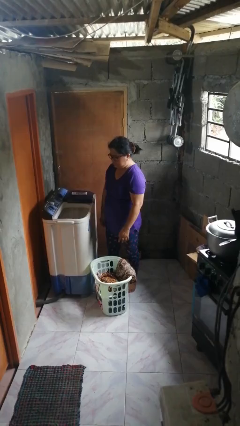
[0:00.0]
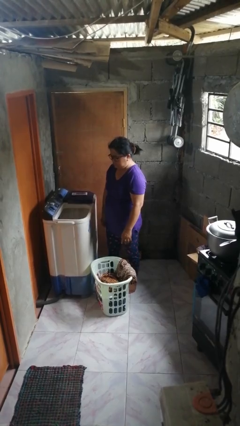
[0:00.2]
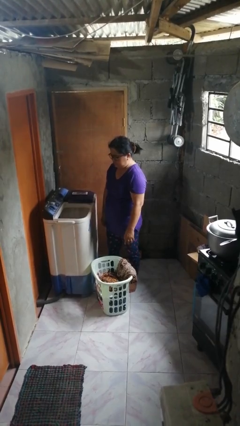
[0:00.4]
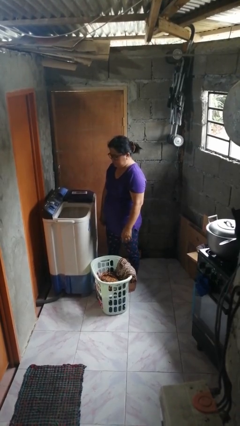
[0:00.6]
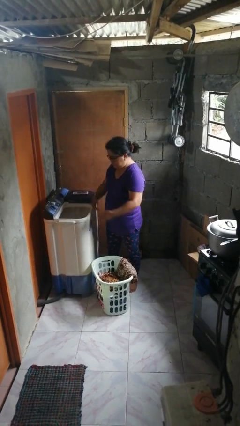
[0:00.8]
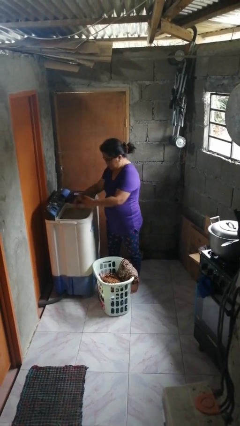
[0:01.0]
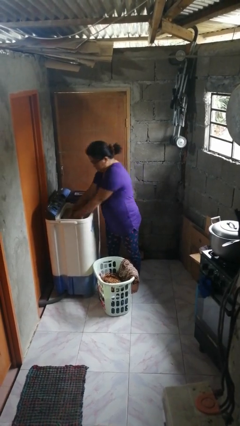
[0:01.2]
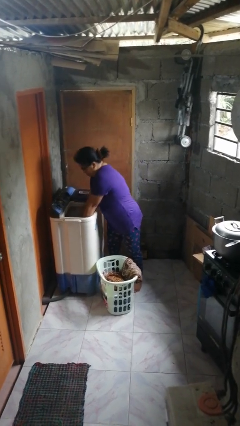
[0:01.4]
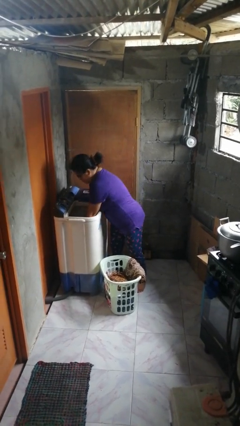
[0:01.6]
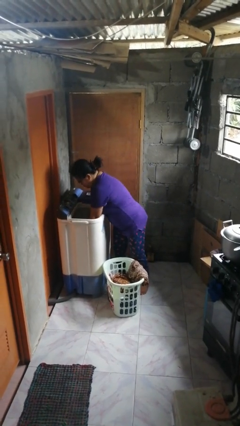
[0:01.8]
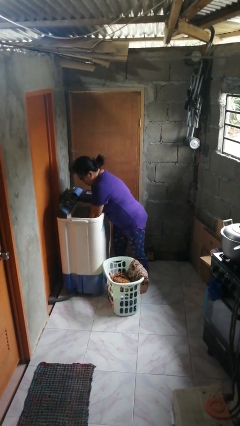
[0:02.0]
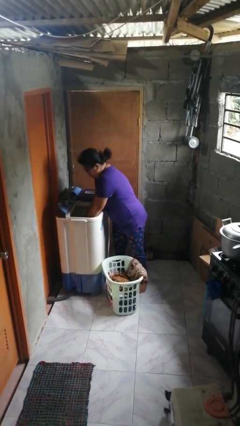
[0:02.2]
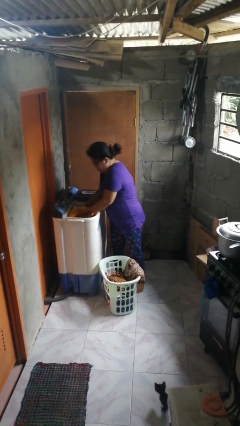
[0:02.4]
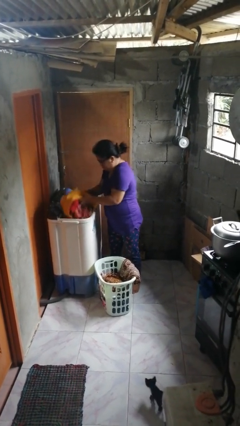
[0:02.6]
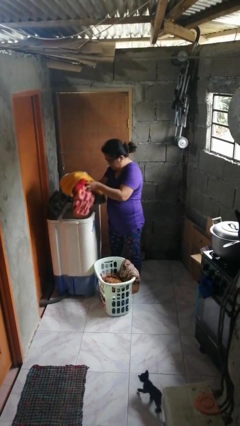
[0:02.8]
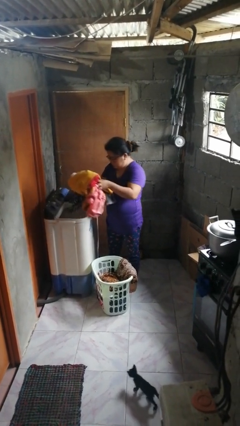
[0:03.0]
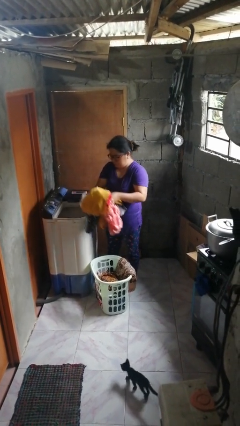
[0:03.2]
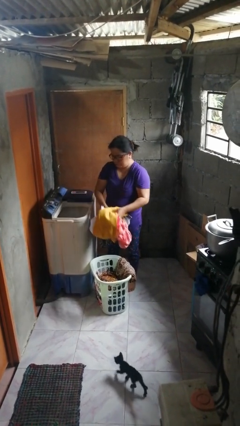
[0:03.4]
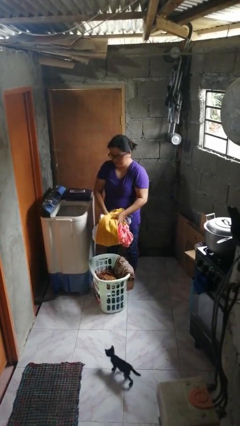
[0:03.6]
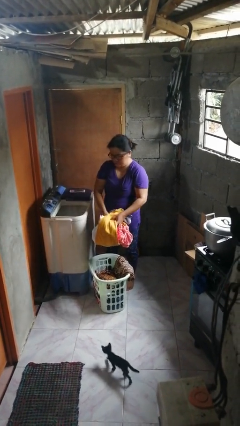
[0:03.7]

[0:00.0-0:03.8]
person unloads clotheswasher

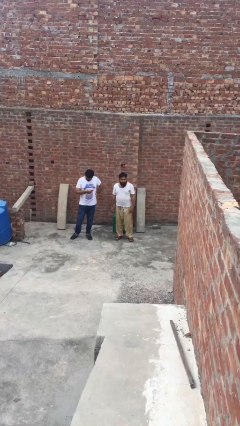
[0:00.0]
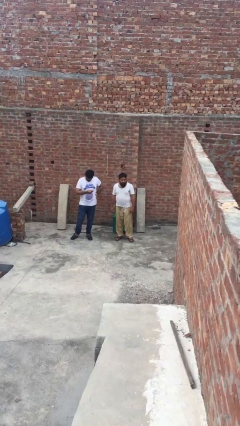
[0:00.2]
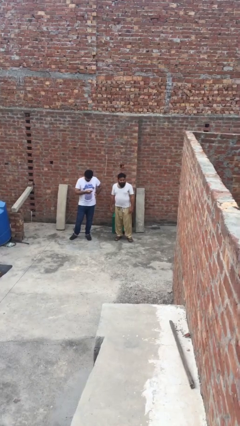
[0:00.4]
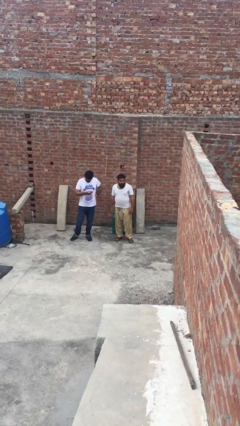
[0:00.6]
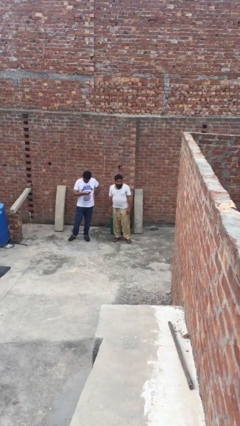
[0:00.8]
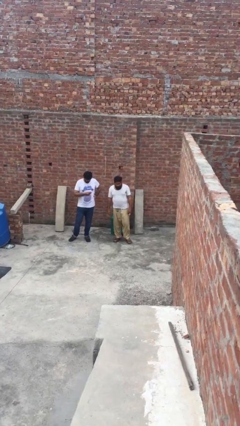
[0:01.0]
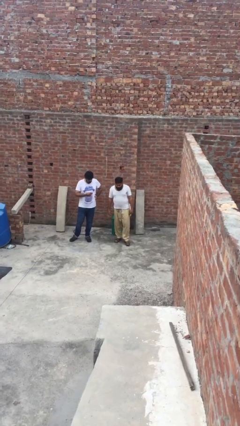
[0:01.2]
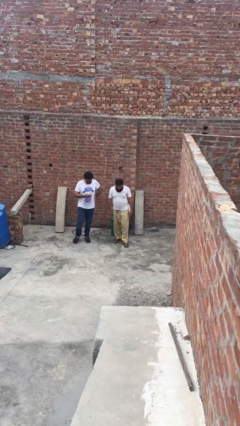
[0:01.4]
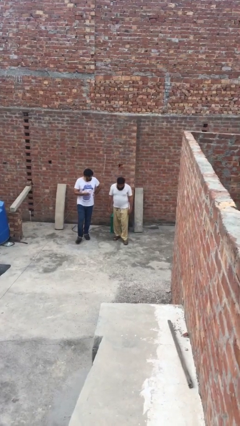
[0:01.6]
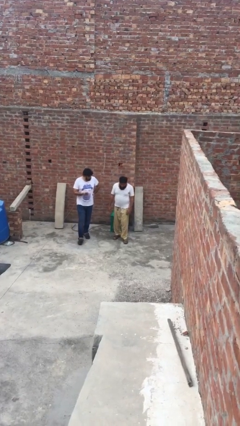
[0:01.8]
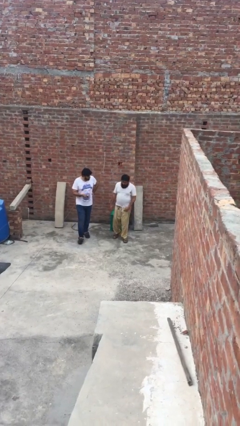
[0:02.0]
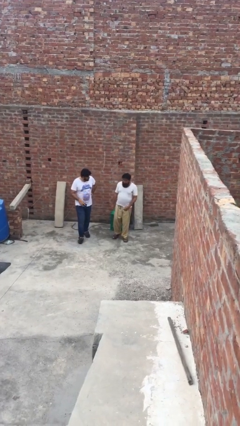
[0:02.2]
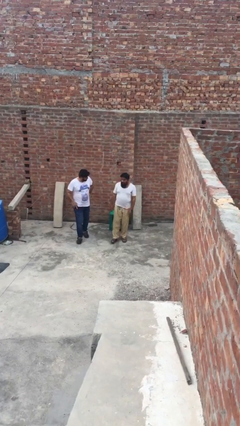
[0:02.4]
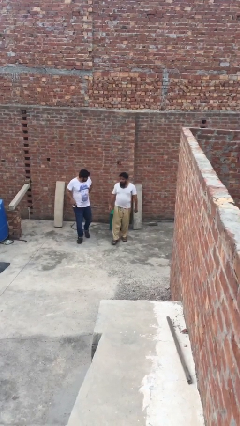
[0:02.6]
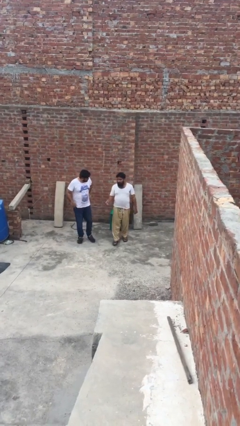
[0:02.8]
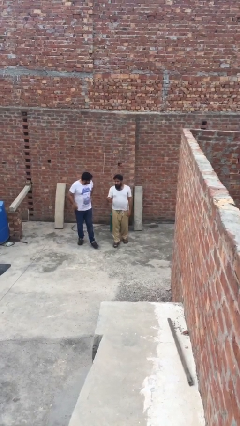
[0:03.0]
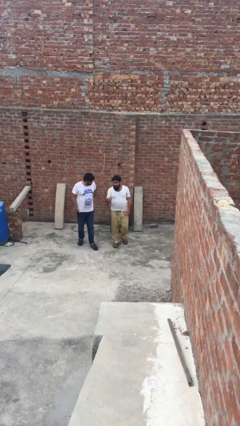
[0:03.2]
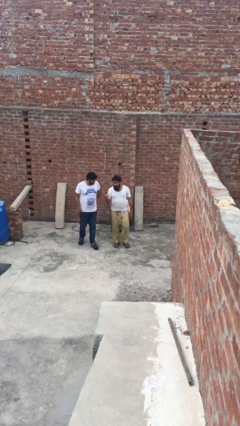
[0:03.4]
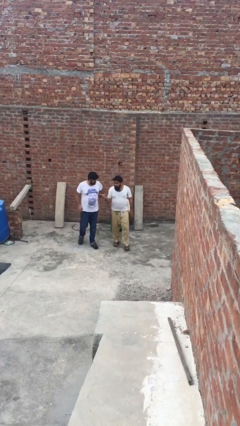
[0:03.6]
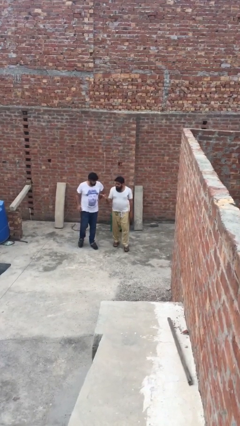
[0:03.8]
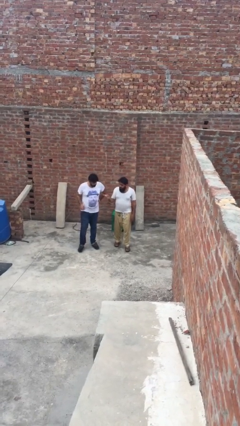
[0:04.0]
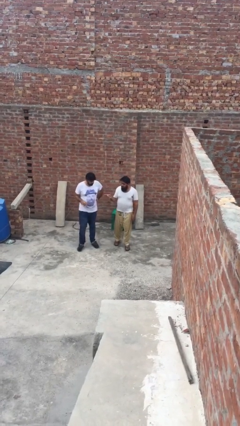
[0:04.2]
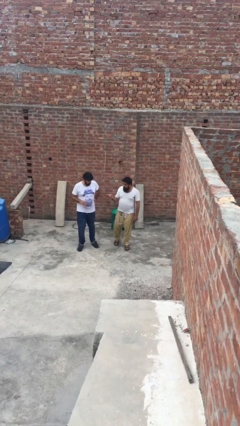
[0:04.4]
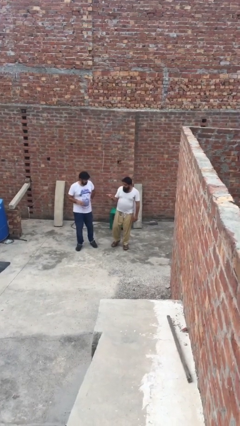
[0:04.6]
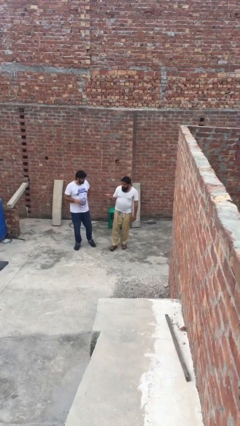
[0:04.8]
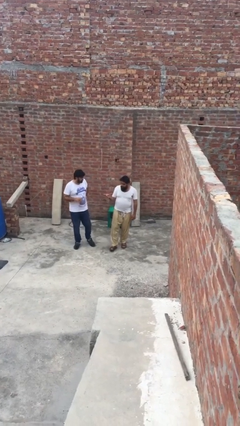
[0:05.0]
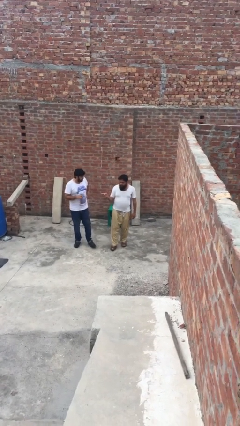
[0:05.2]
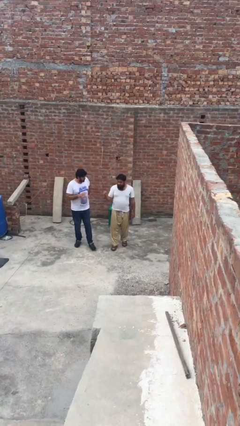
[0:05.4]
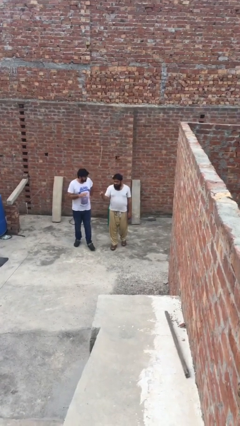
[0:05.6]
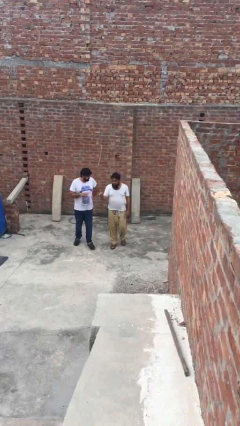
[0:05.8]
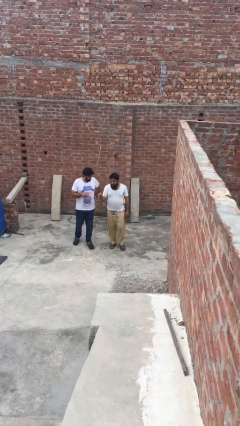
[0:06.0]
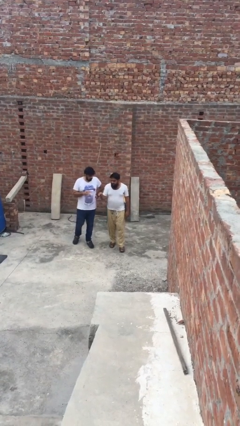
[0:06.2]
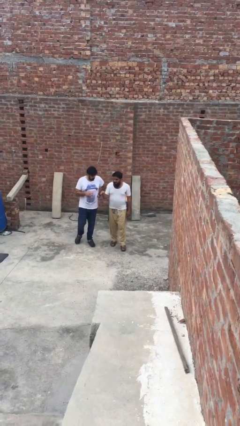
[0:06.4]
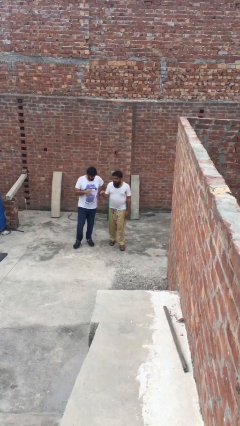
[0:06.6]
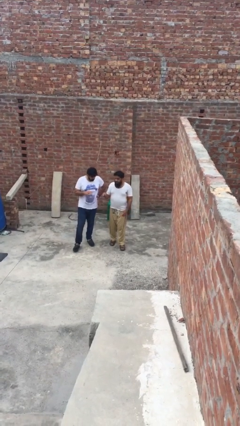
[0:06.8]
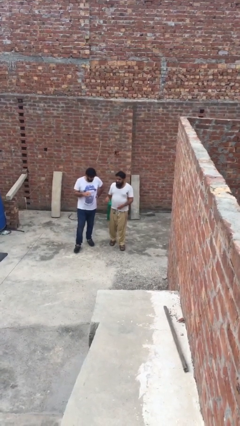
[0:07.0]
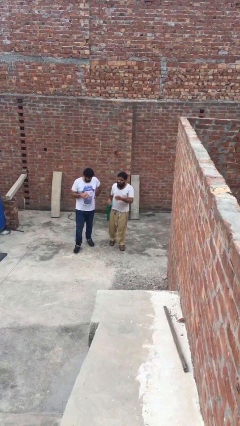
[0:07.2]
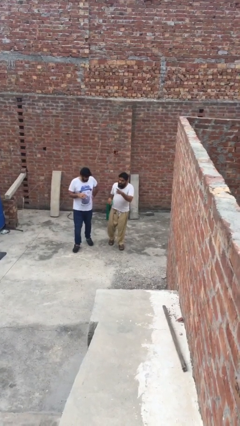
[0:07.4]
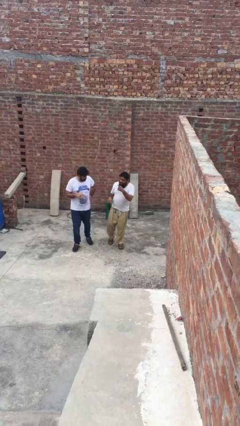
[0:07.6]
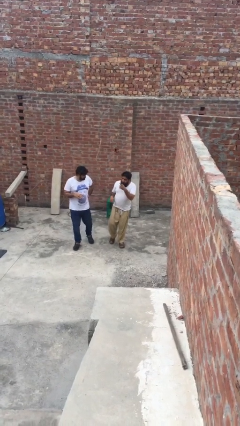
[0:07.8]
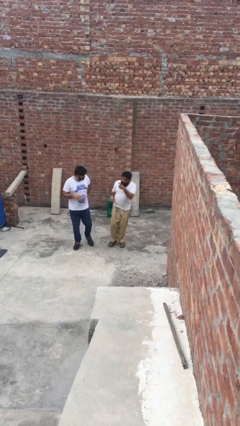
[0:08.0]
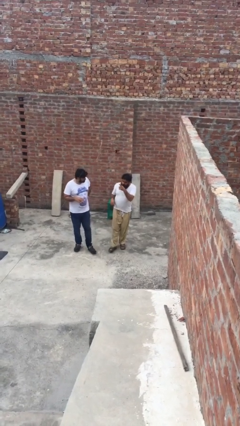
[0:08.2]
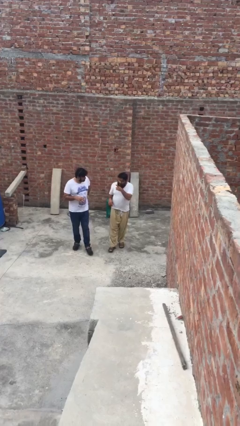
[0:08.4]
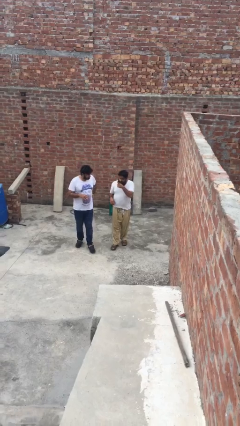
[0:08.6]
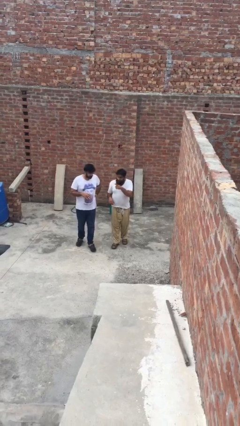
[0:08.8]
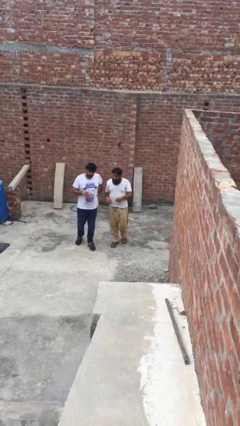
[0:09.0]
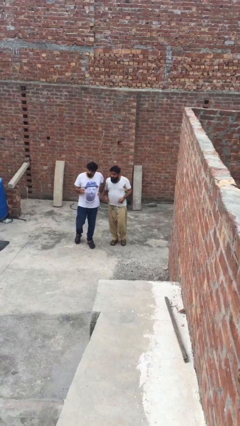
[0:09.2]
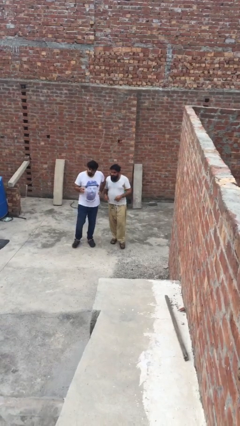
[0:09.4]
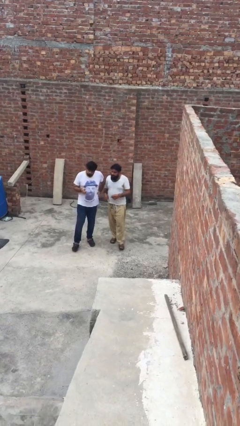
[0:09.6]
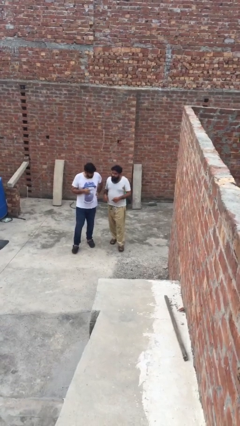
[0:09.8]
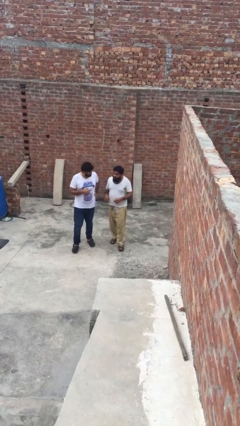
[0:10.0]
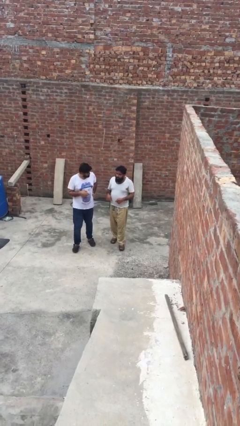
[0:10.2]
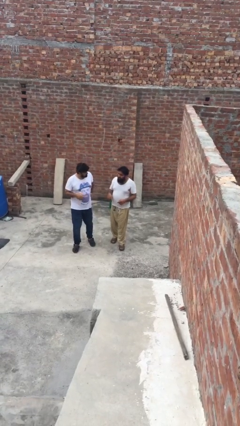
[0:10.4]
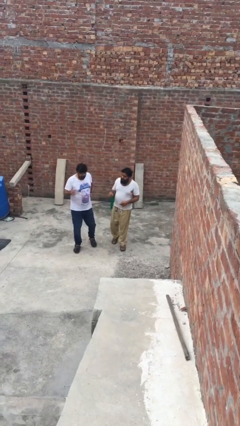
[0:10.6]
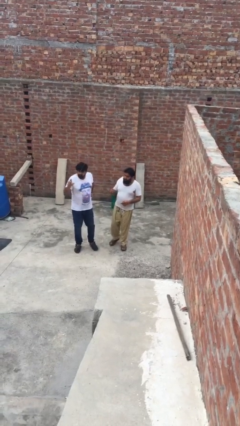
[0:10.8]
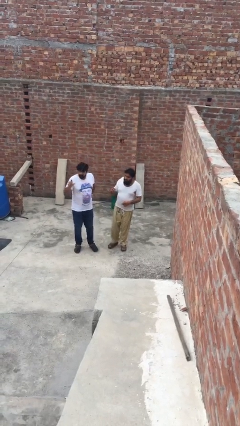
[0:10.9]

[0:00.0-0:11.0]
person talks to person

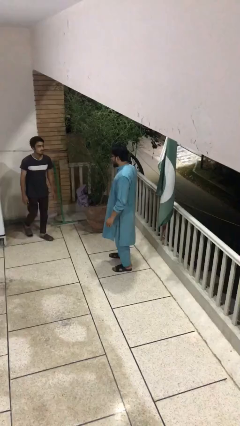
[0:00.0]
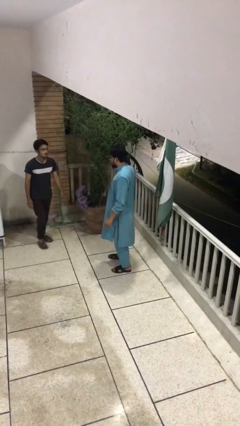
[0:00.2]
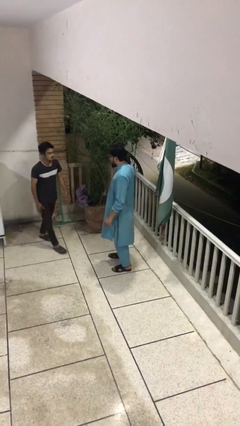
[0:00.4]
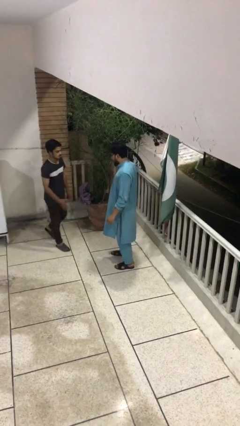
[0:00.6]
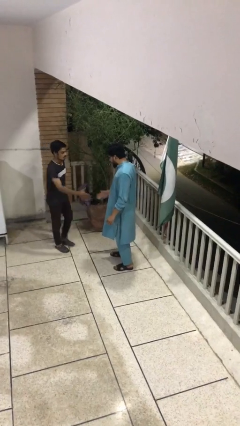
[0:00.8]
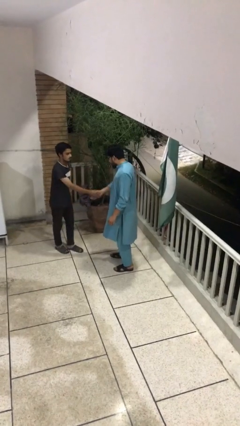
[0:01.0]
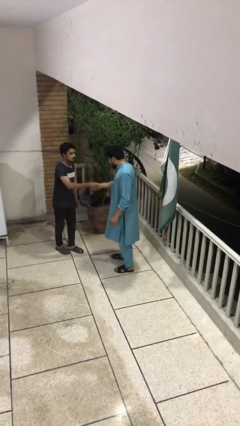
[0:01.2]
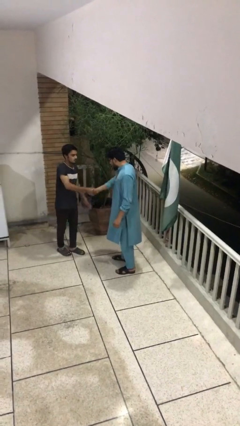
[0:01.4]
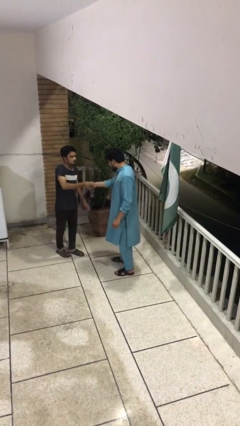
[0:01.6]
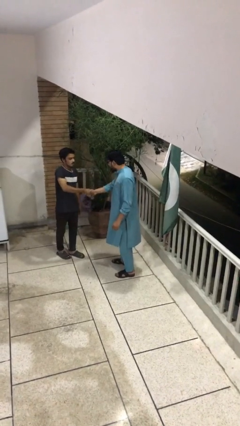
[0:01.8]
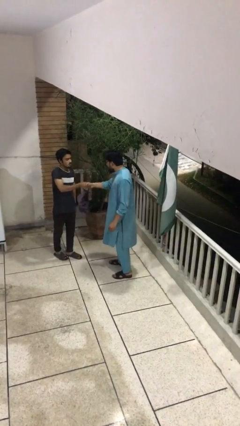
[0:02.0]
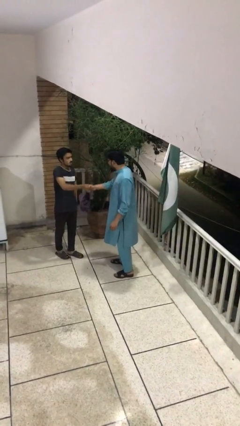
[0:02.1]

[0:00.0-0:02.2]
person shakes hand

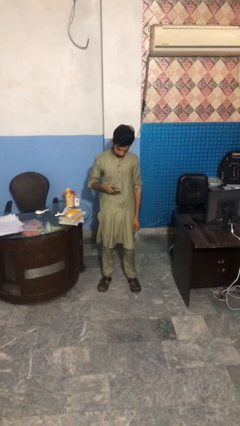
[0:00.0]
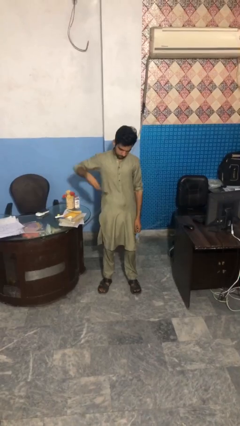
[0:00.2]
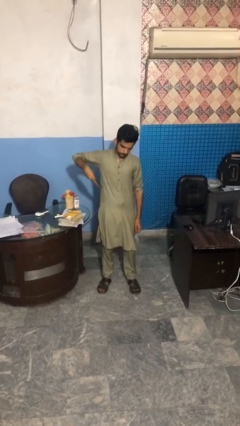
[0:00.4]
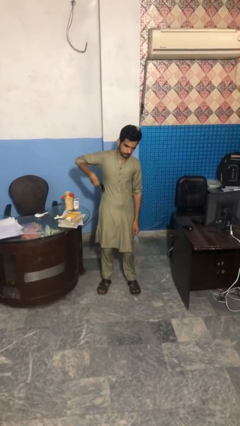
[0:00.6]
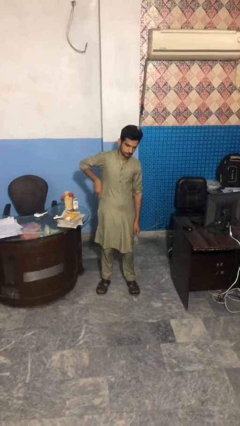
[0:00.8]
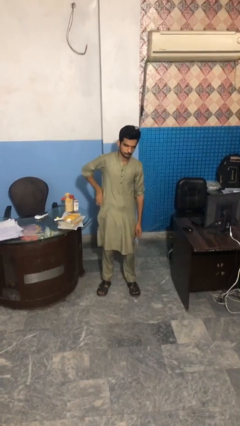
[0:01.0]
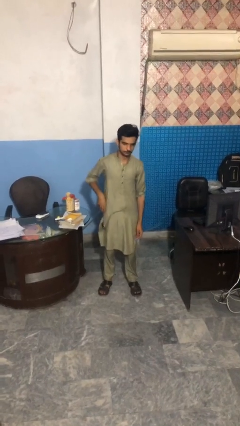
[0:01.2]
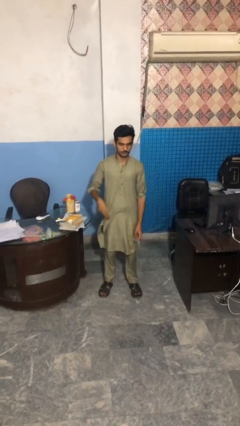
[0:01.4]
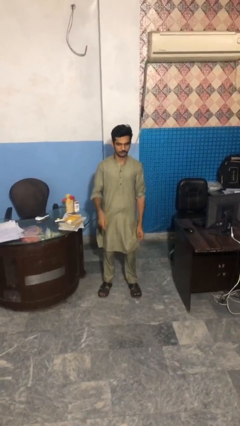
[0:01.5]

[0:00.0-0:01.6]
person puts phone into pocket
